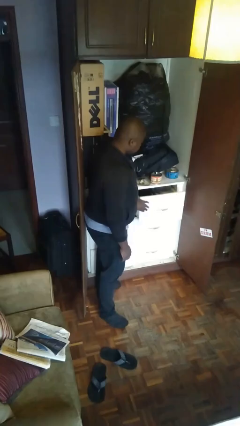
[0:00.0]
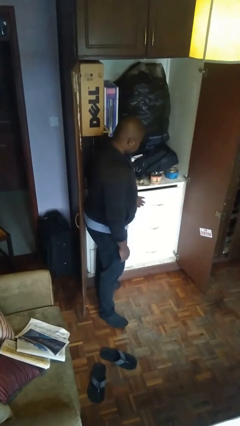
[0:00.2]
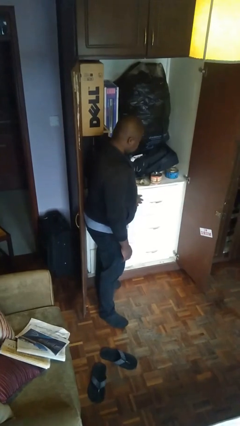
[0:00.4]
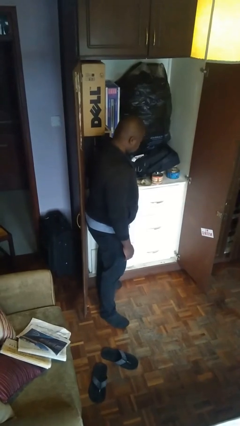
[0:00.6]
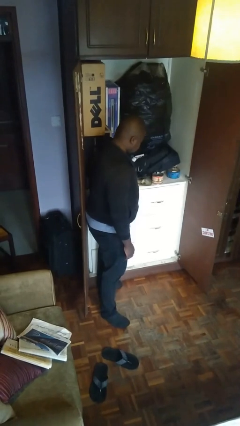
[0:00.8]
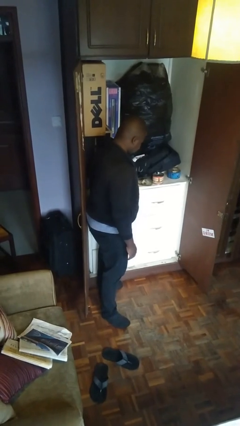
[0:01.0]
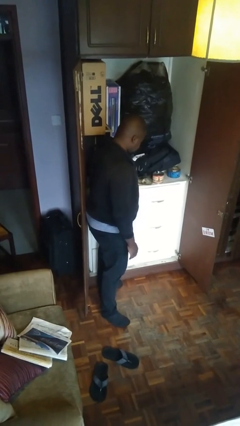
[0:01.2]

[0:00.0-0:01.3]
person closes dresser drawer

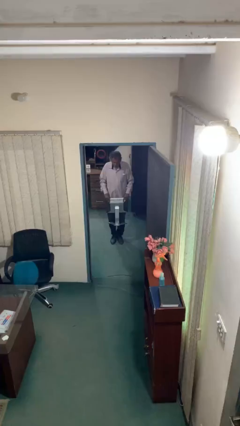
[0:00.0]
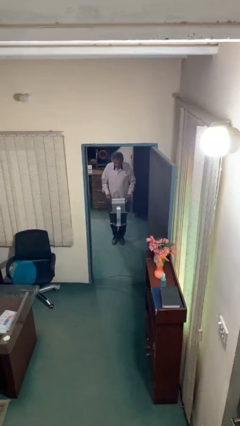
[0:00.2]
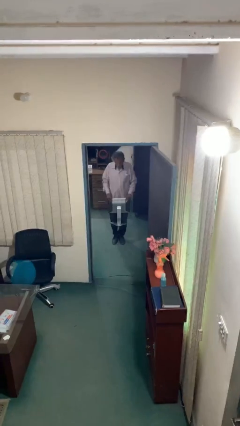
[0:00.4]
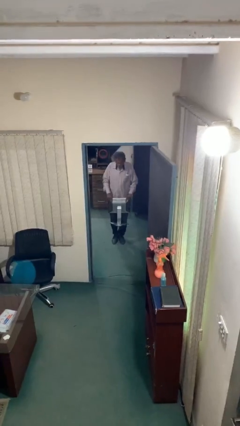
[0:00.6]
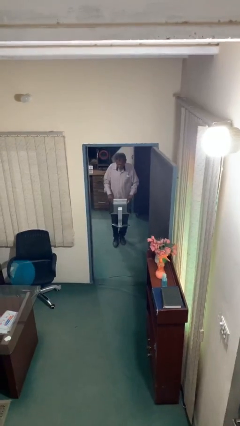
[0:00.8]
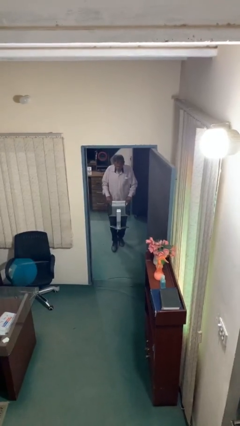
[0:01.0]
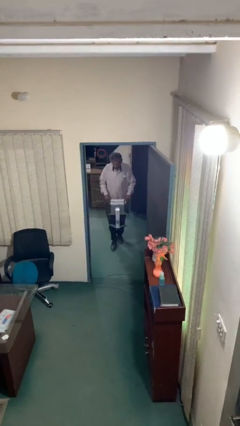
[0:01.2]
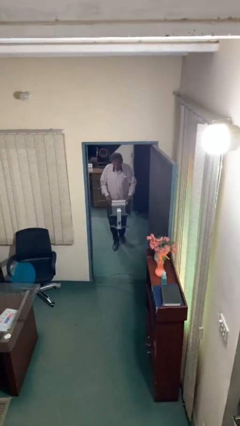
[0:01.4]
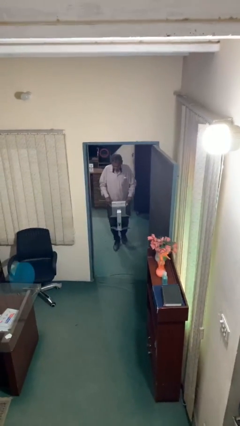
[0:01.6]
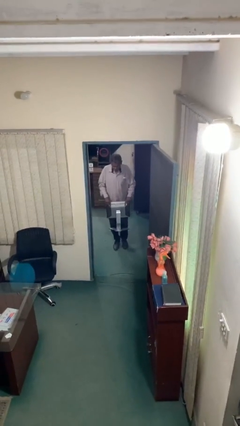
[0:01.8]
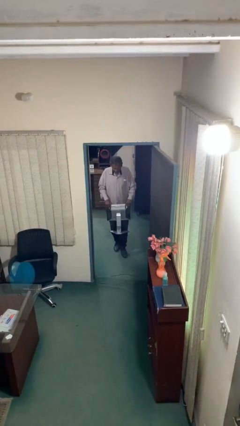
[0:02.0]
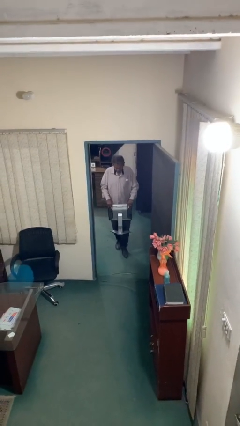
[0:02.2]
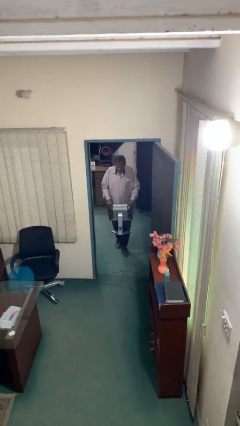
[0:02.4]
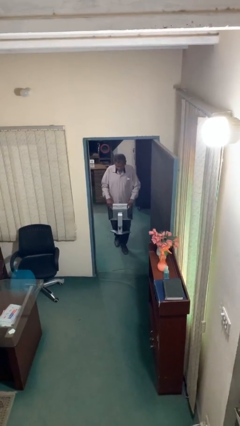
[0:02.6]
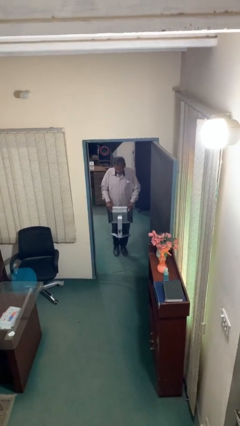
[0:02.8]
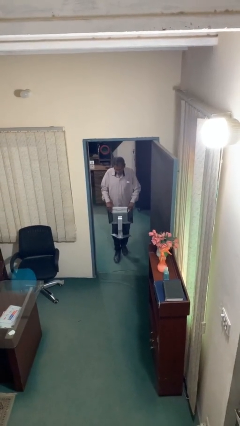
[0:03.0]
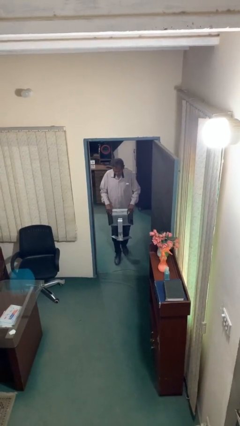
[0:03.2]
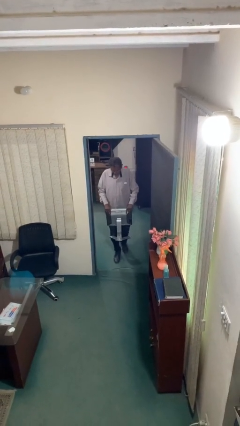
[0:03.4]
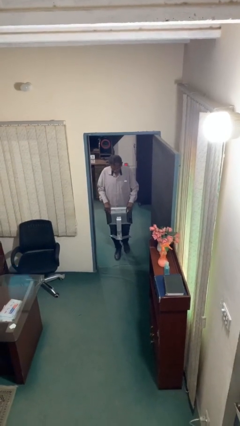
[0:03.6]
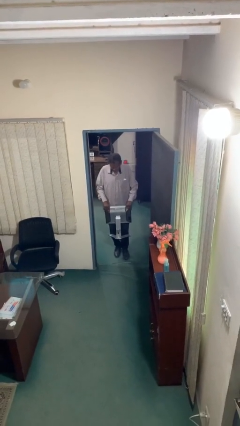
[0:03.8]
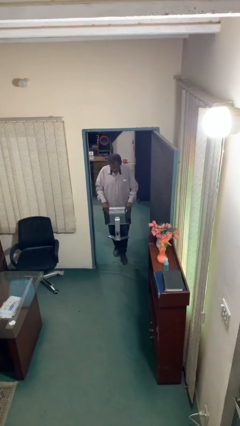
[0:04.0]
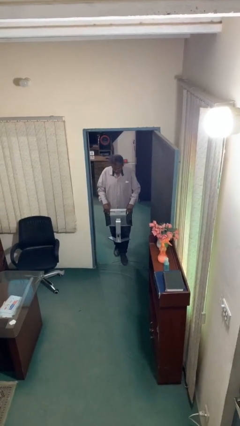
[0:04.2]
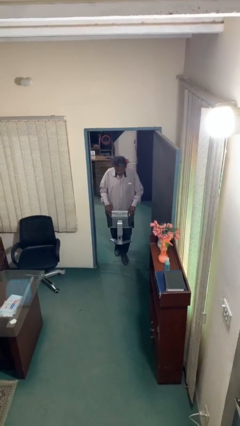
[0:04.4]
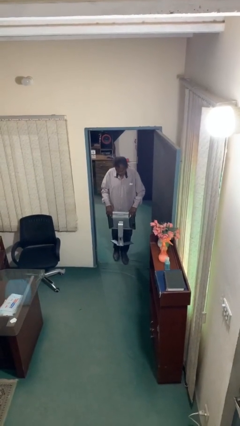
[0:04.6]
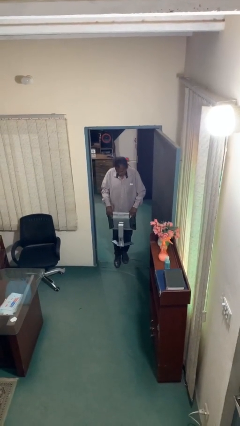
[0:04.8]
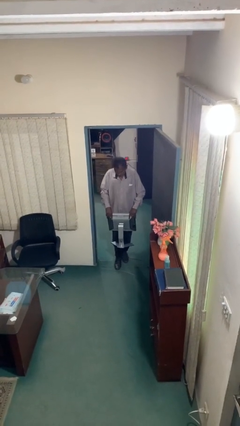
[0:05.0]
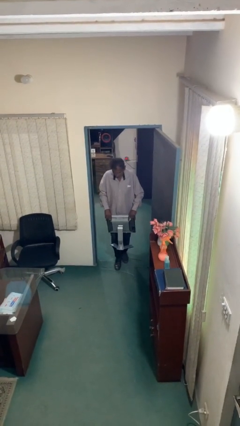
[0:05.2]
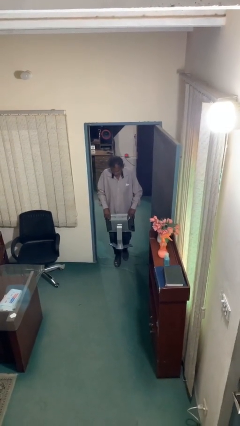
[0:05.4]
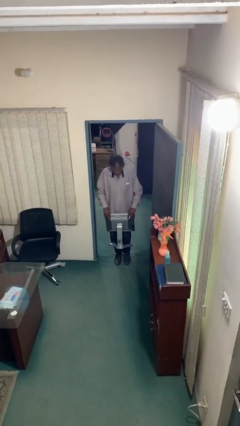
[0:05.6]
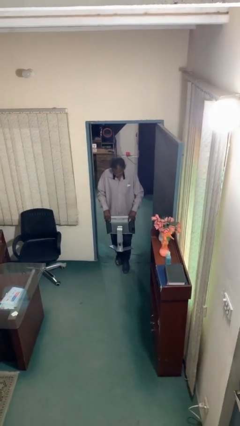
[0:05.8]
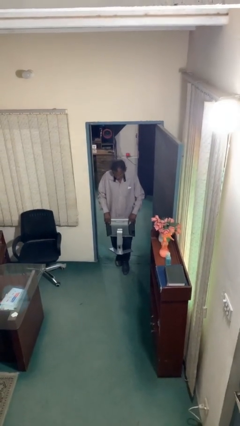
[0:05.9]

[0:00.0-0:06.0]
person carries heavy object

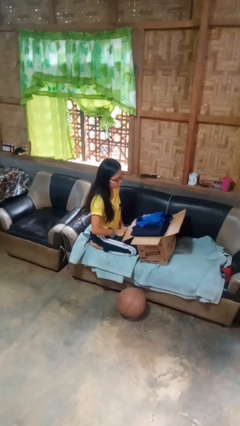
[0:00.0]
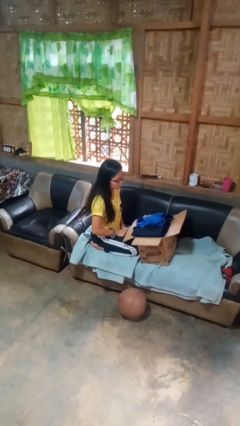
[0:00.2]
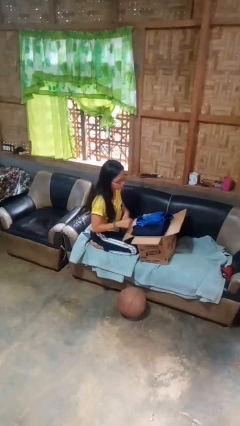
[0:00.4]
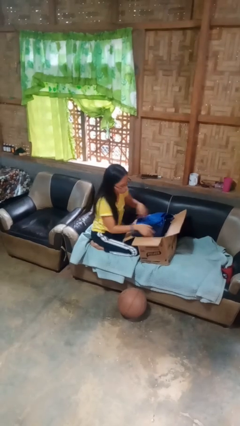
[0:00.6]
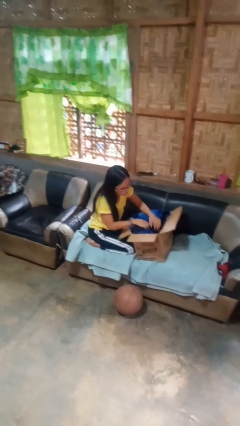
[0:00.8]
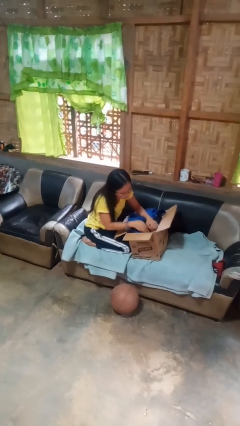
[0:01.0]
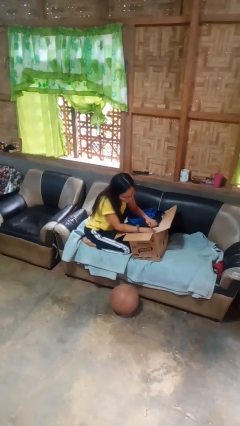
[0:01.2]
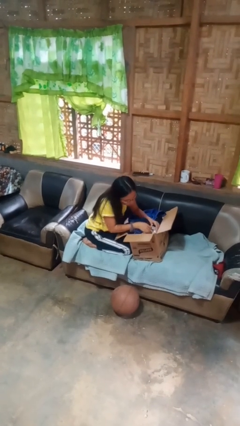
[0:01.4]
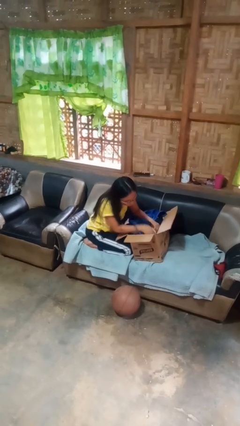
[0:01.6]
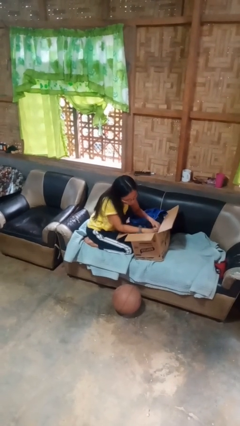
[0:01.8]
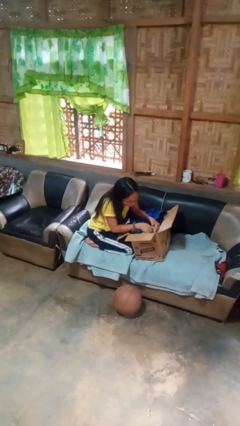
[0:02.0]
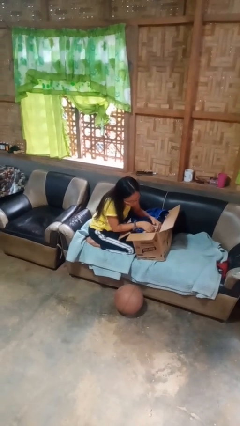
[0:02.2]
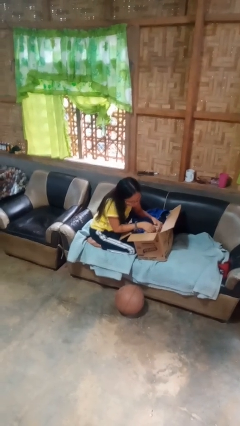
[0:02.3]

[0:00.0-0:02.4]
person searches in box

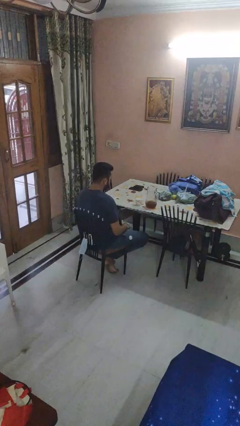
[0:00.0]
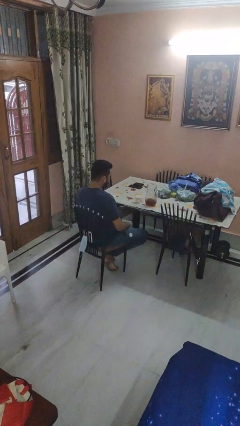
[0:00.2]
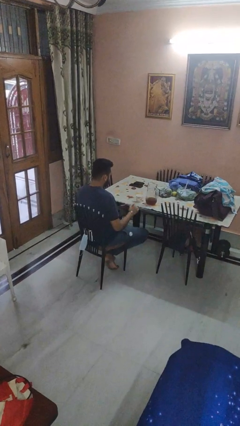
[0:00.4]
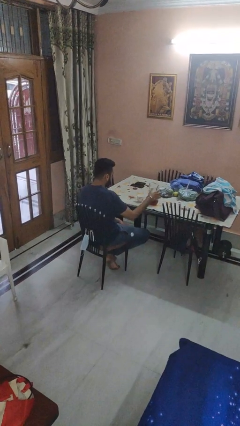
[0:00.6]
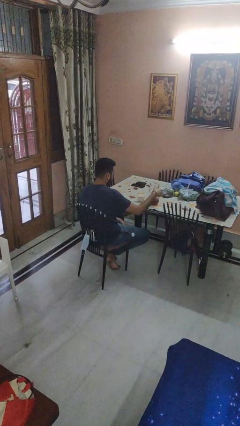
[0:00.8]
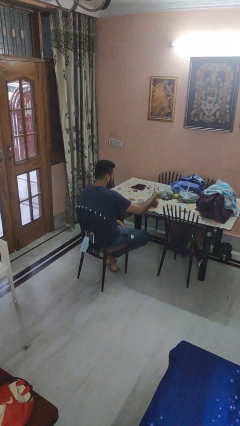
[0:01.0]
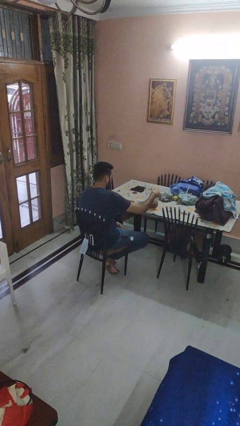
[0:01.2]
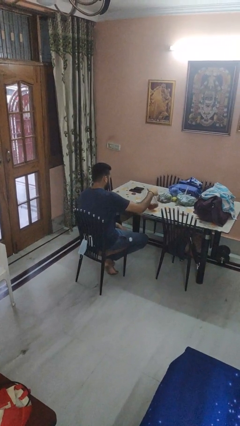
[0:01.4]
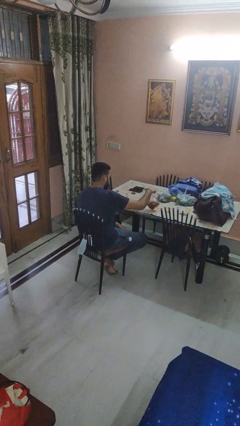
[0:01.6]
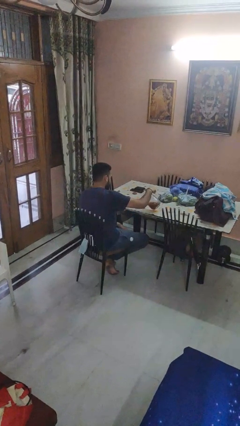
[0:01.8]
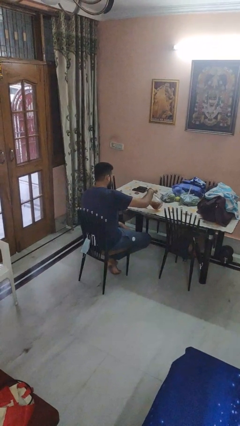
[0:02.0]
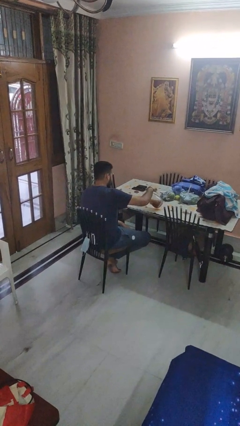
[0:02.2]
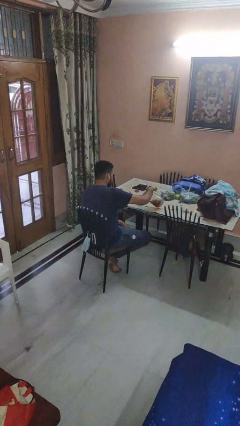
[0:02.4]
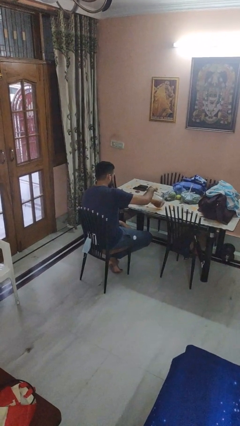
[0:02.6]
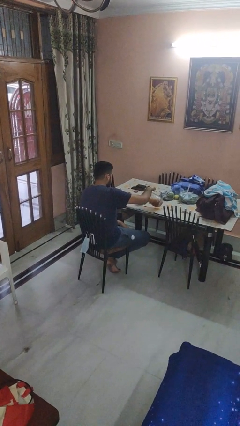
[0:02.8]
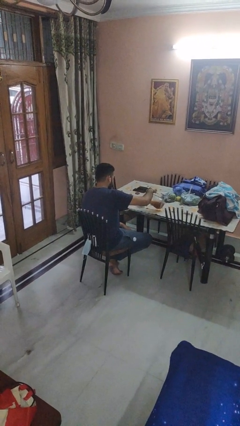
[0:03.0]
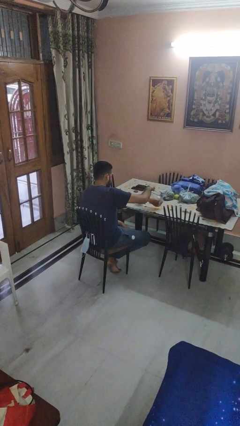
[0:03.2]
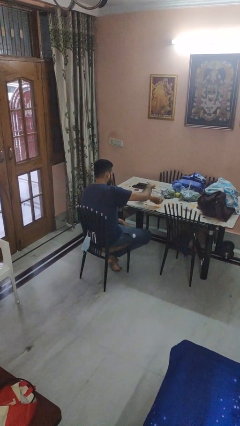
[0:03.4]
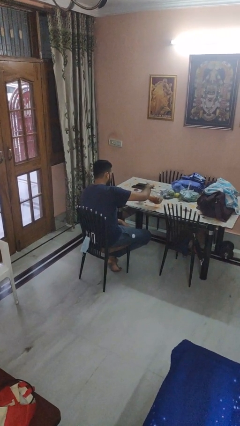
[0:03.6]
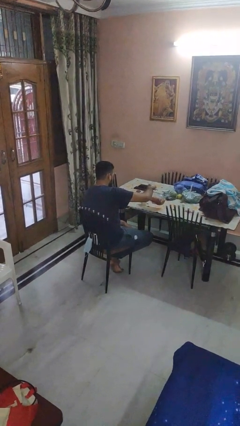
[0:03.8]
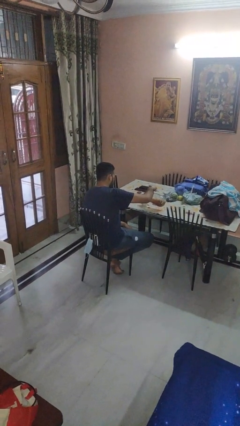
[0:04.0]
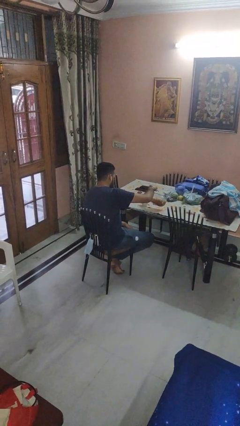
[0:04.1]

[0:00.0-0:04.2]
person pours coffee into mug

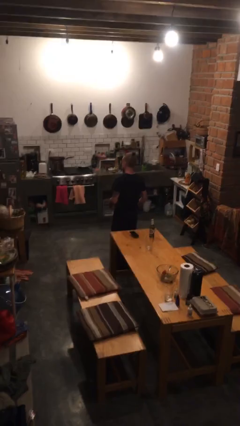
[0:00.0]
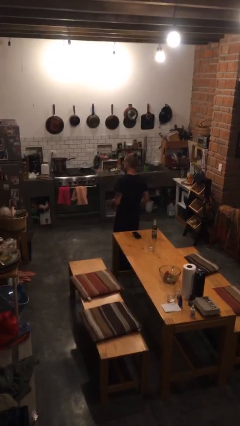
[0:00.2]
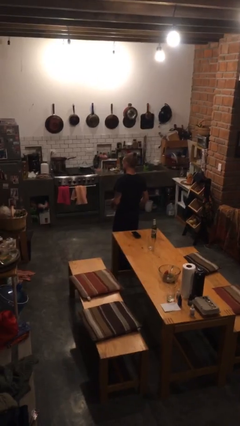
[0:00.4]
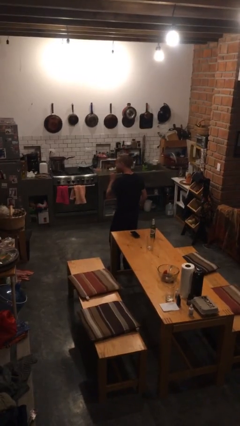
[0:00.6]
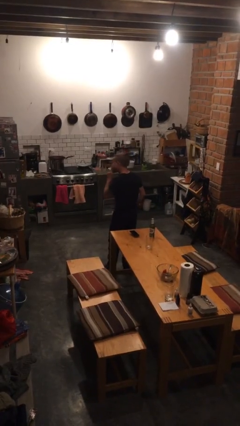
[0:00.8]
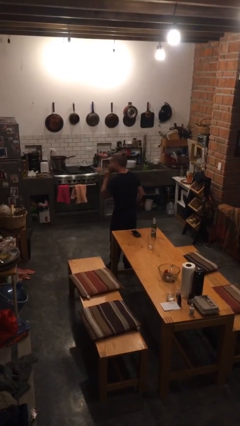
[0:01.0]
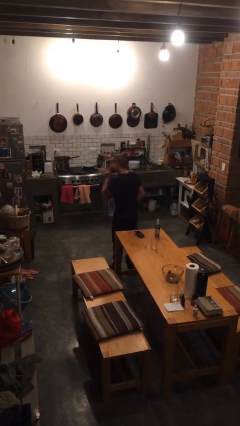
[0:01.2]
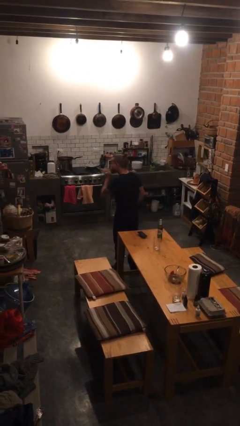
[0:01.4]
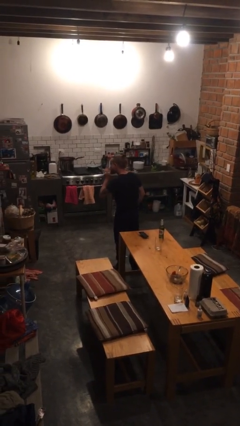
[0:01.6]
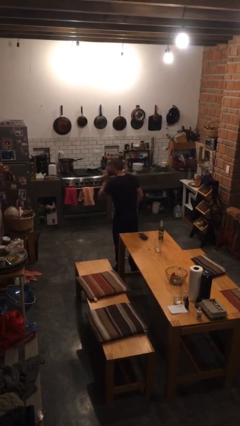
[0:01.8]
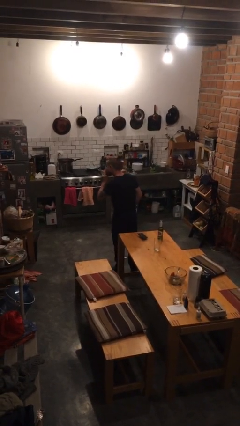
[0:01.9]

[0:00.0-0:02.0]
person gestures be quiet

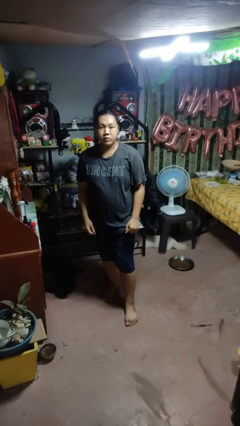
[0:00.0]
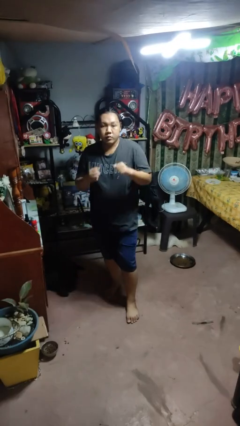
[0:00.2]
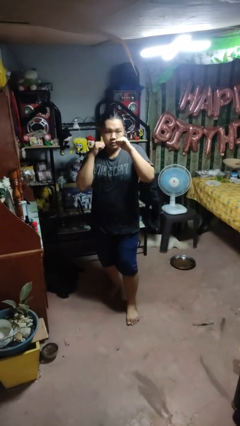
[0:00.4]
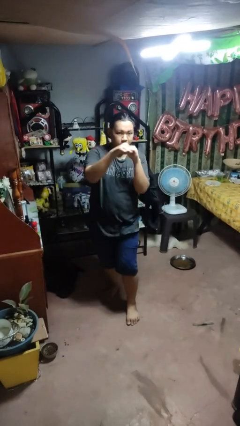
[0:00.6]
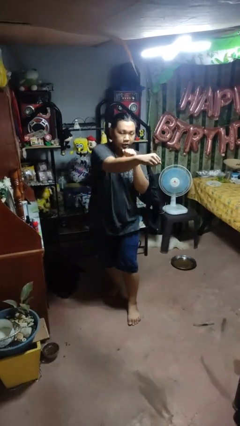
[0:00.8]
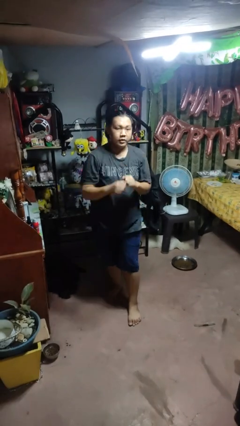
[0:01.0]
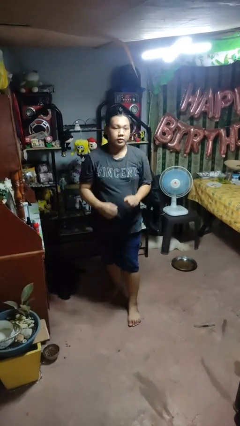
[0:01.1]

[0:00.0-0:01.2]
person punches

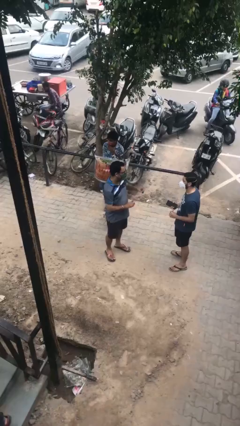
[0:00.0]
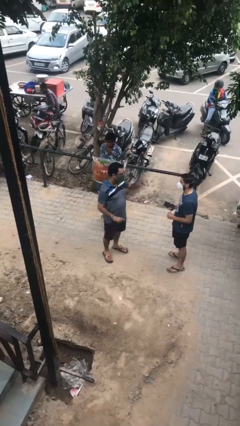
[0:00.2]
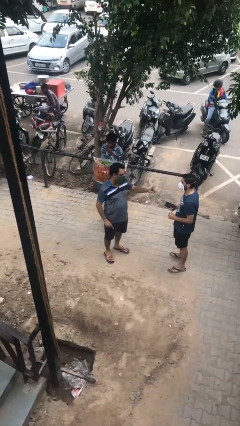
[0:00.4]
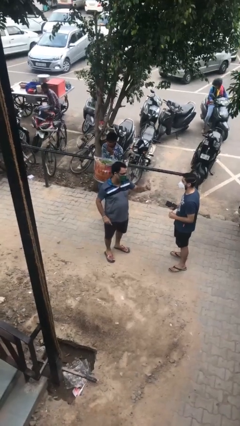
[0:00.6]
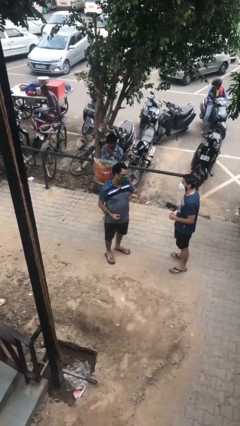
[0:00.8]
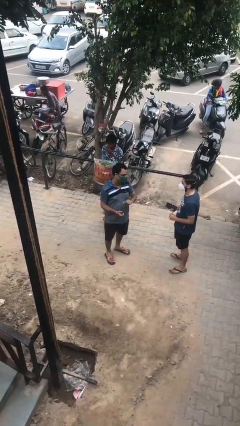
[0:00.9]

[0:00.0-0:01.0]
person points at person
